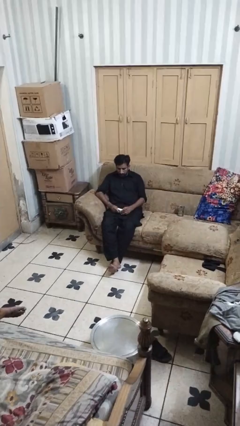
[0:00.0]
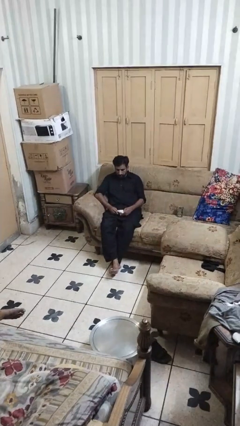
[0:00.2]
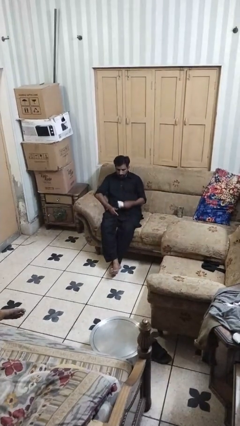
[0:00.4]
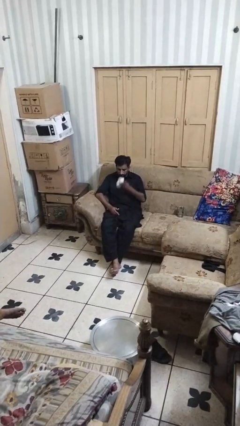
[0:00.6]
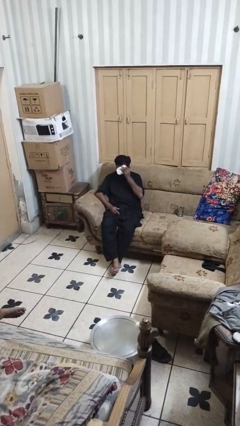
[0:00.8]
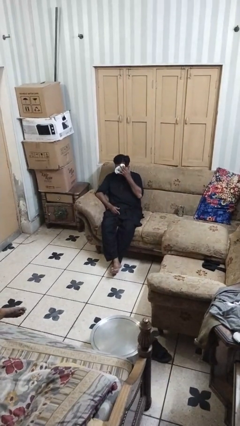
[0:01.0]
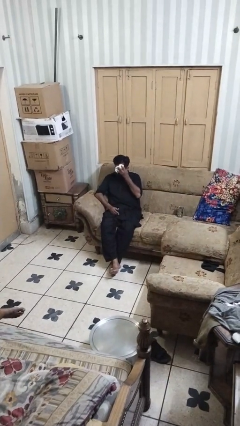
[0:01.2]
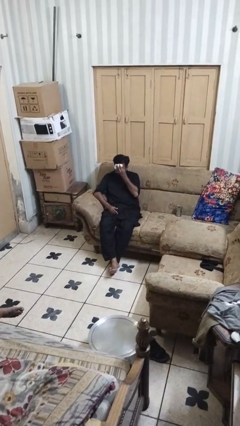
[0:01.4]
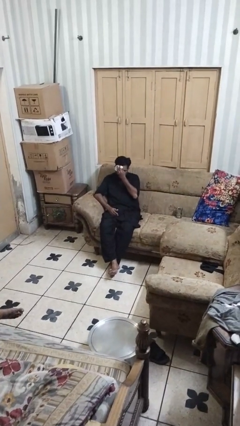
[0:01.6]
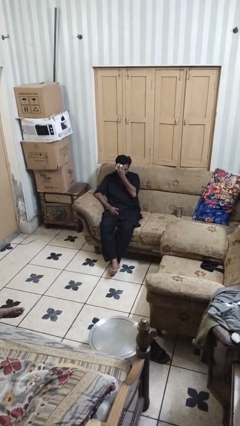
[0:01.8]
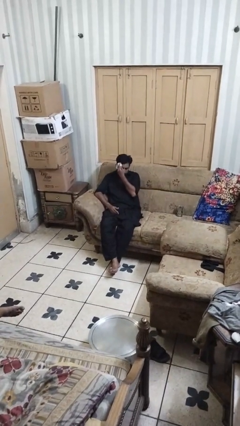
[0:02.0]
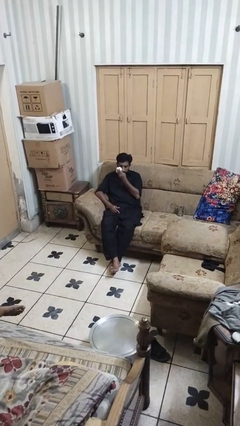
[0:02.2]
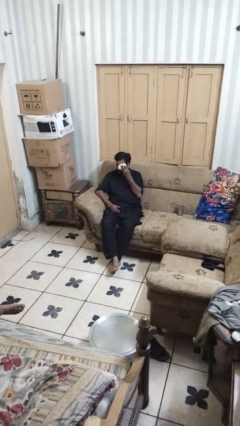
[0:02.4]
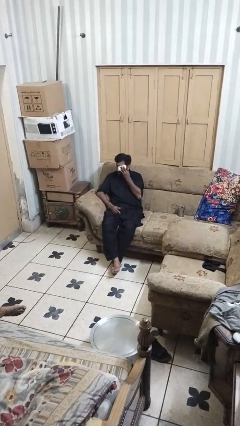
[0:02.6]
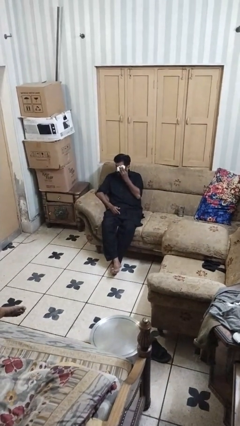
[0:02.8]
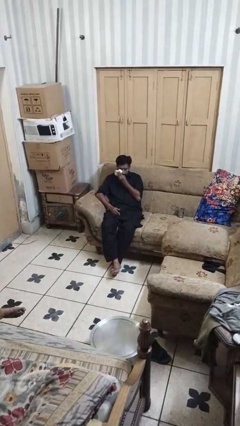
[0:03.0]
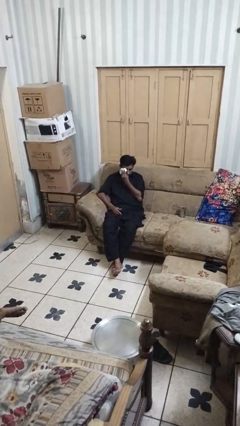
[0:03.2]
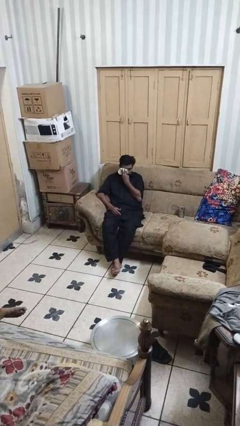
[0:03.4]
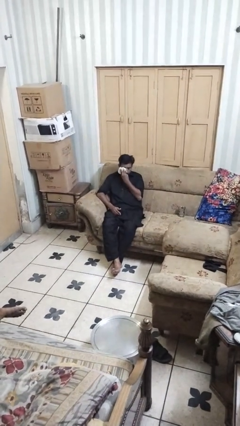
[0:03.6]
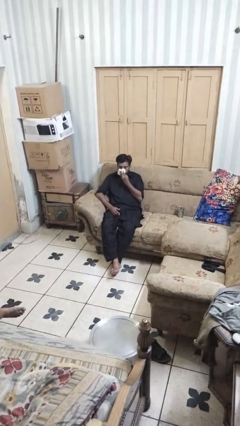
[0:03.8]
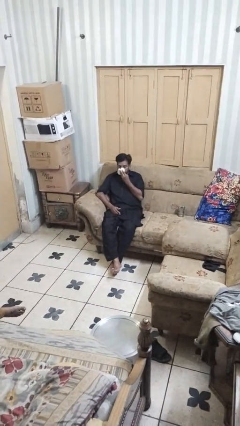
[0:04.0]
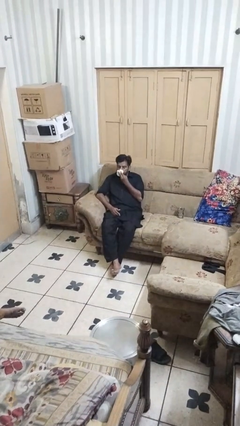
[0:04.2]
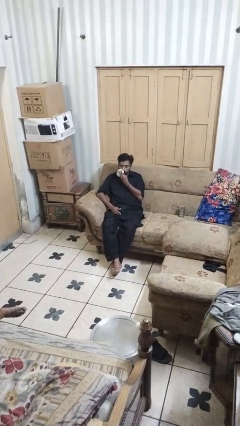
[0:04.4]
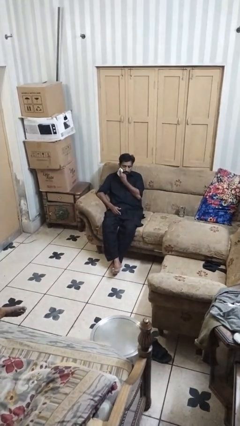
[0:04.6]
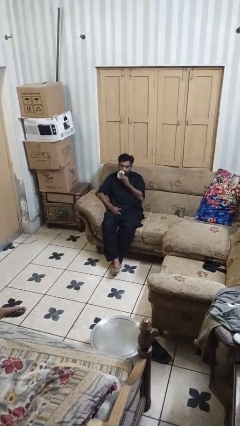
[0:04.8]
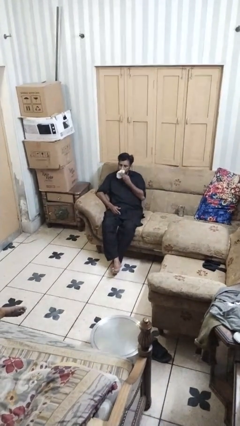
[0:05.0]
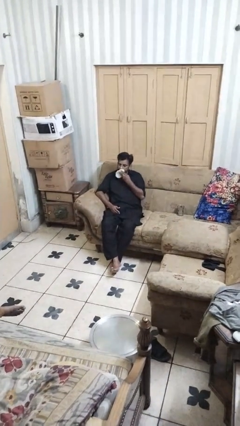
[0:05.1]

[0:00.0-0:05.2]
person wipes mouth with napkin

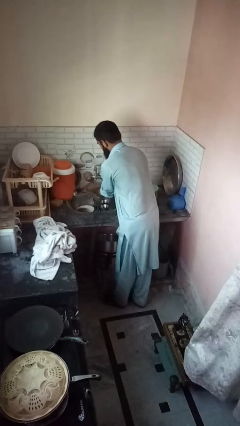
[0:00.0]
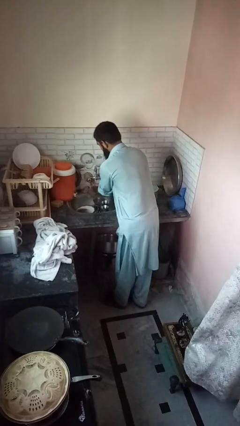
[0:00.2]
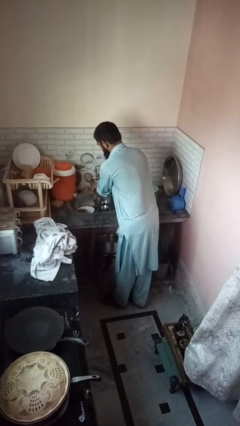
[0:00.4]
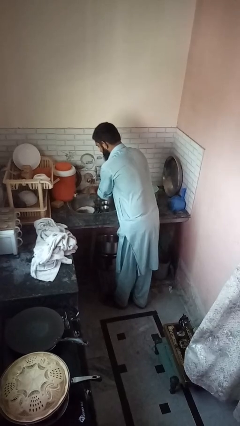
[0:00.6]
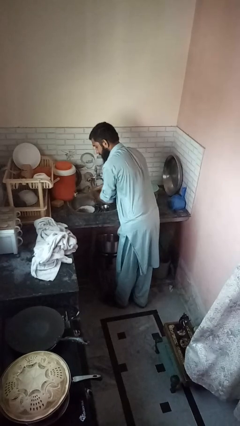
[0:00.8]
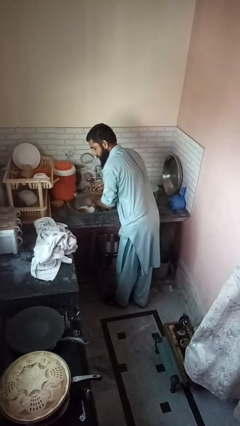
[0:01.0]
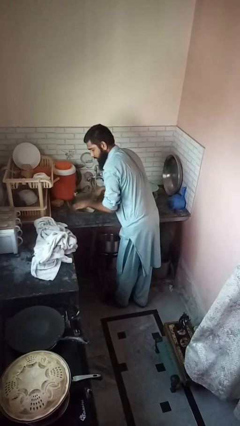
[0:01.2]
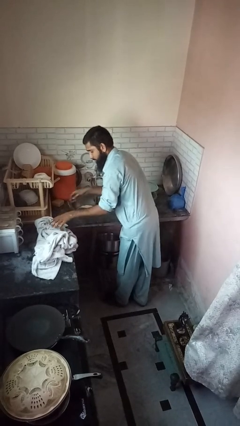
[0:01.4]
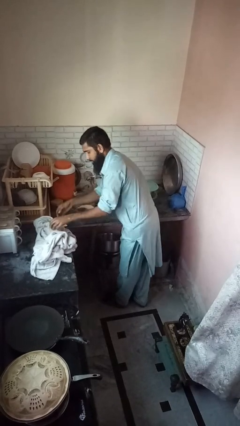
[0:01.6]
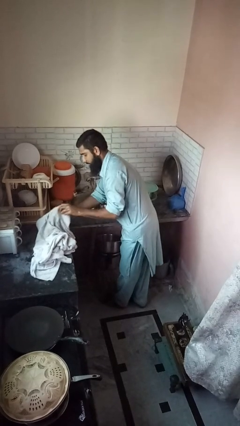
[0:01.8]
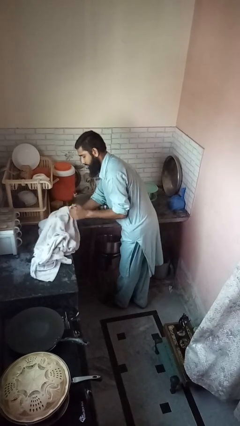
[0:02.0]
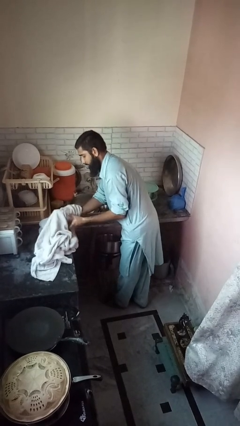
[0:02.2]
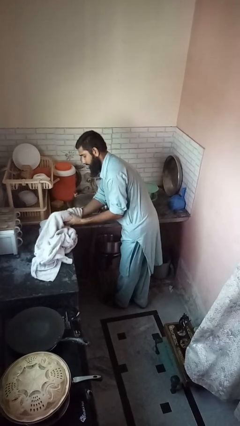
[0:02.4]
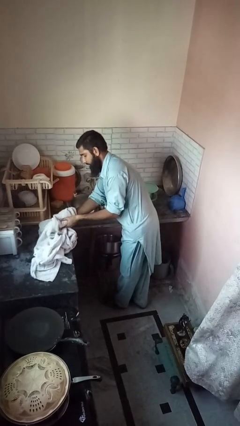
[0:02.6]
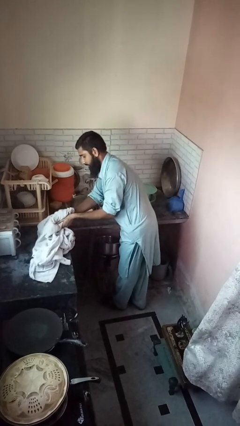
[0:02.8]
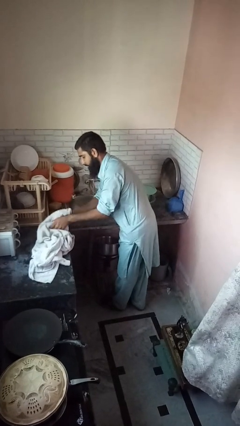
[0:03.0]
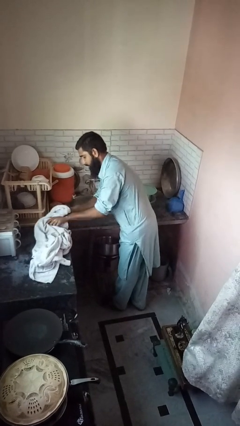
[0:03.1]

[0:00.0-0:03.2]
person dries hands with towel

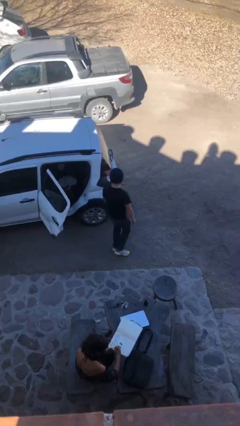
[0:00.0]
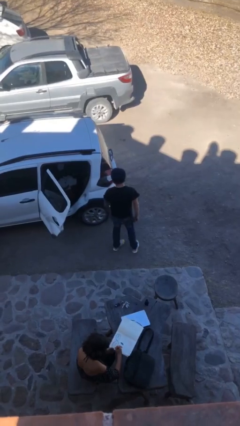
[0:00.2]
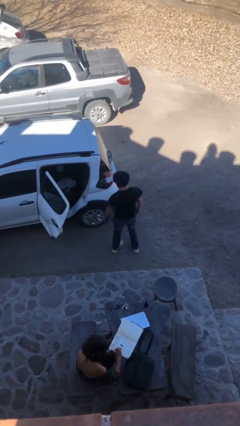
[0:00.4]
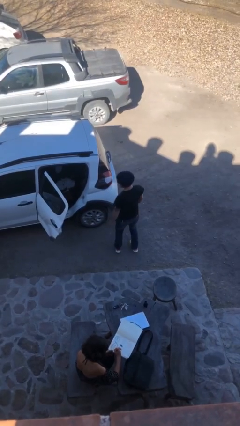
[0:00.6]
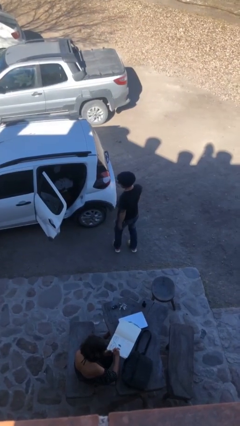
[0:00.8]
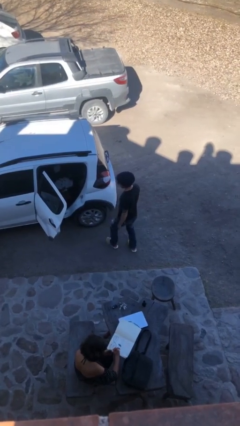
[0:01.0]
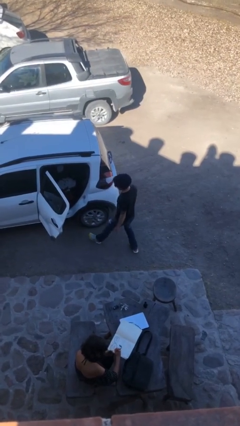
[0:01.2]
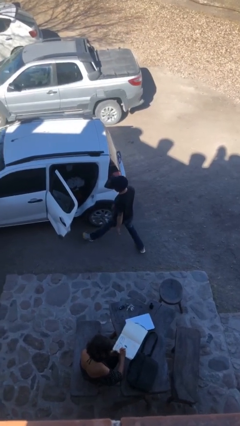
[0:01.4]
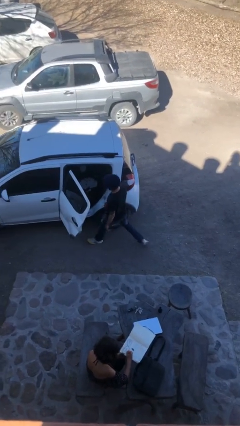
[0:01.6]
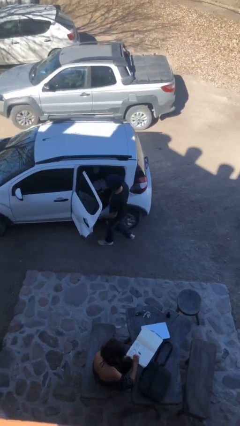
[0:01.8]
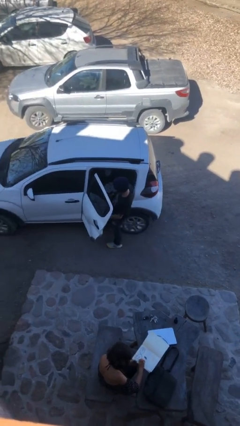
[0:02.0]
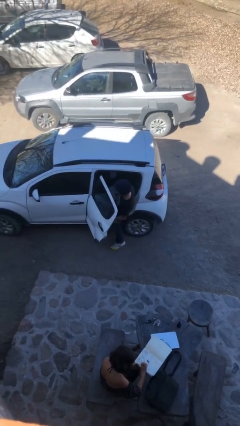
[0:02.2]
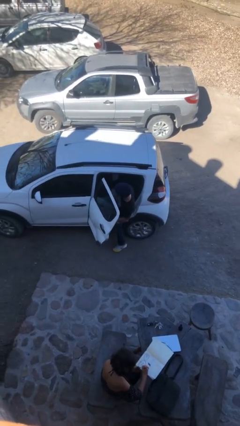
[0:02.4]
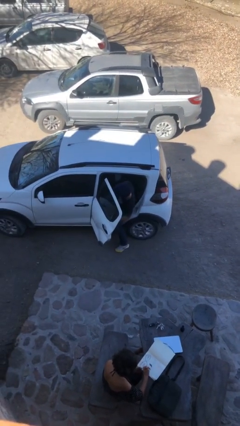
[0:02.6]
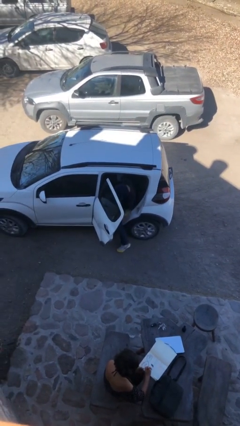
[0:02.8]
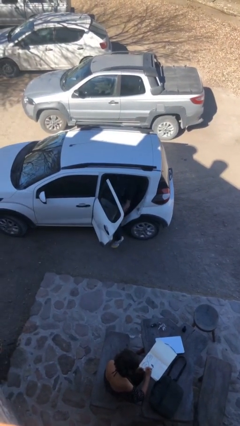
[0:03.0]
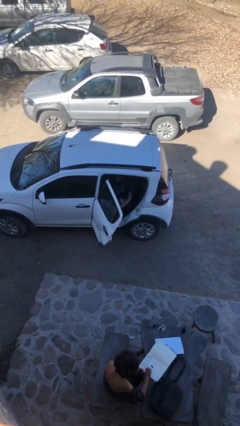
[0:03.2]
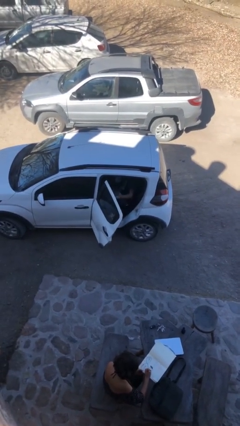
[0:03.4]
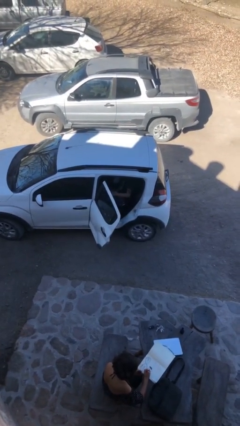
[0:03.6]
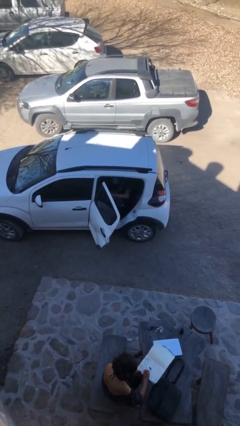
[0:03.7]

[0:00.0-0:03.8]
person enters car

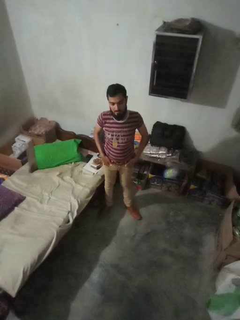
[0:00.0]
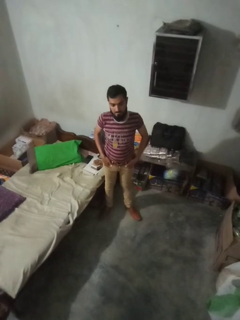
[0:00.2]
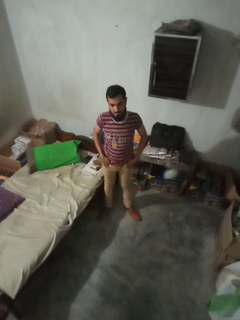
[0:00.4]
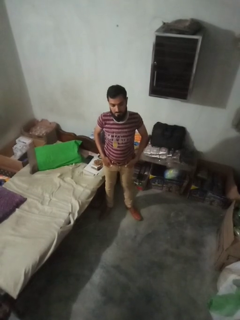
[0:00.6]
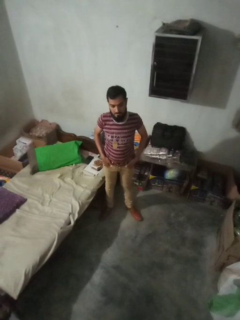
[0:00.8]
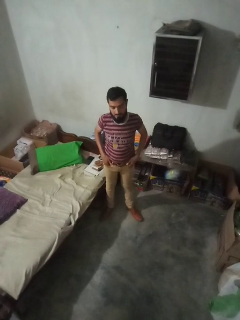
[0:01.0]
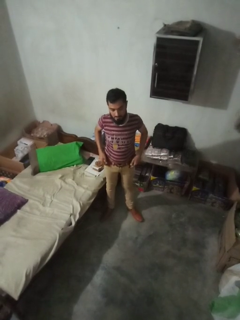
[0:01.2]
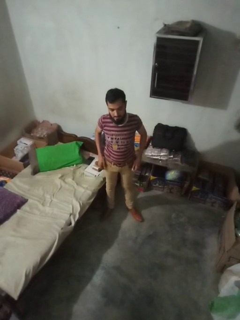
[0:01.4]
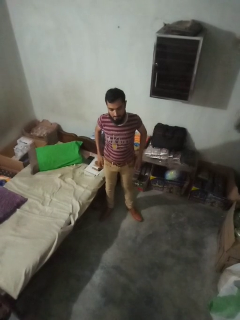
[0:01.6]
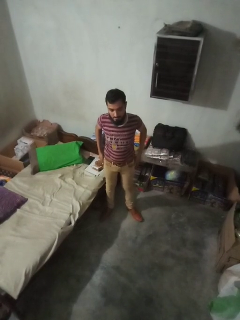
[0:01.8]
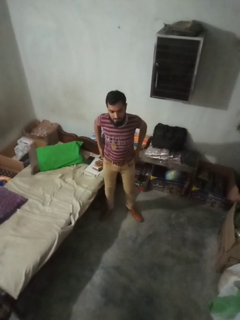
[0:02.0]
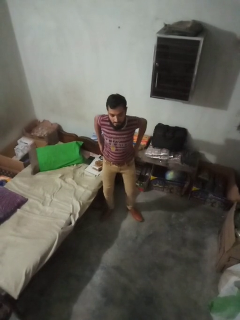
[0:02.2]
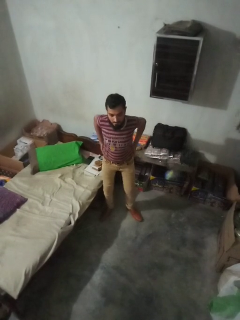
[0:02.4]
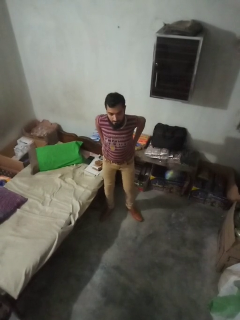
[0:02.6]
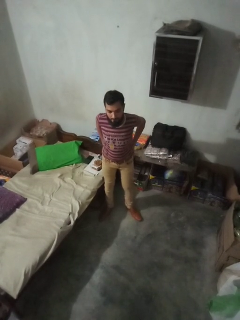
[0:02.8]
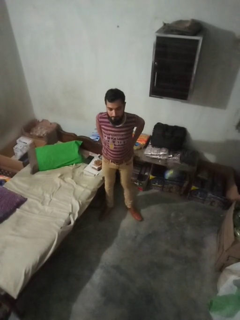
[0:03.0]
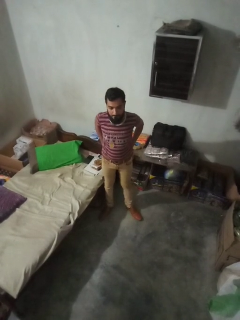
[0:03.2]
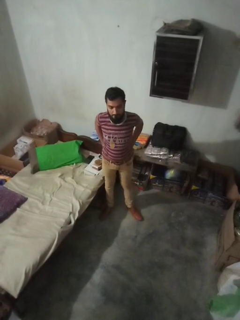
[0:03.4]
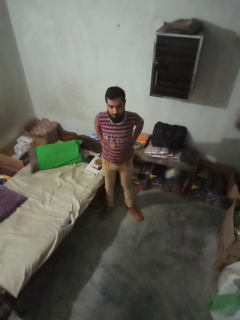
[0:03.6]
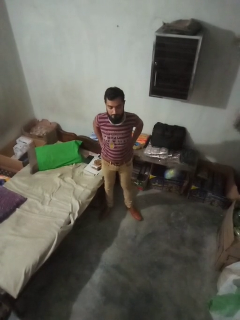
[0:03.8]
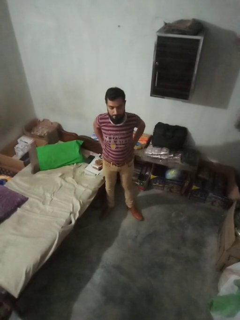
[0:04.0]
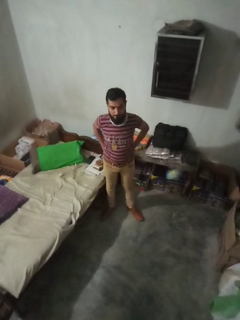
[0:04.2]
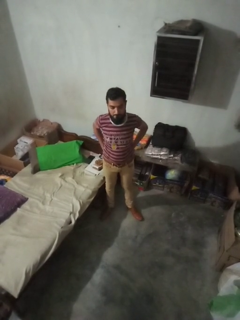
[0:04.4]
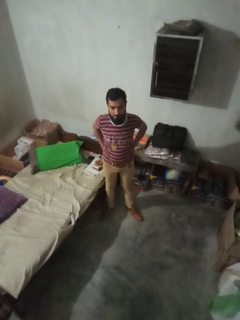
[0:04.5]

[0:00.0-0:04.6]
person puts hands in back pockets

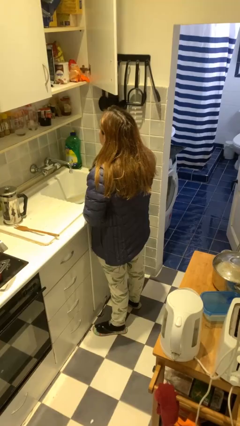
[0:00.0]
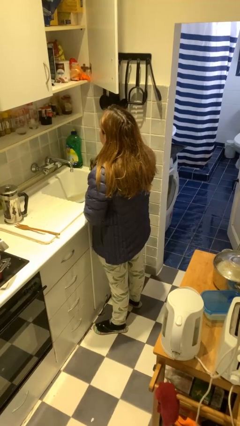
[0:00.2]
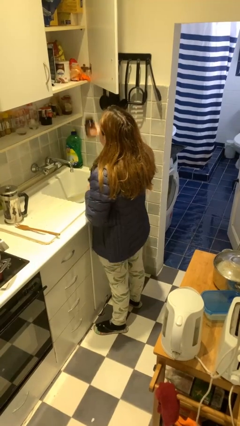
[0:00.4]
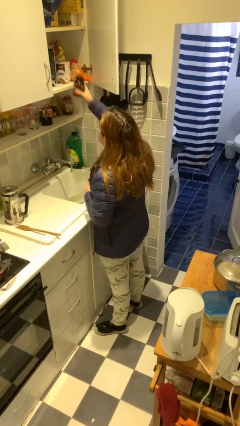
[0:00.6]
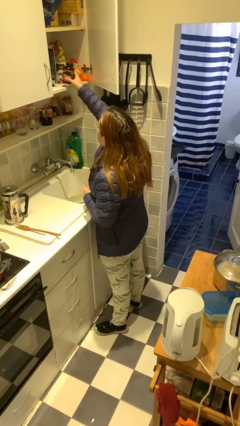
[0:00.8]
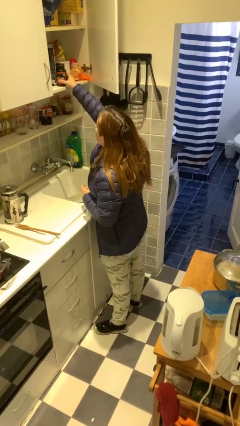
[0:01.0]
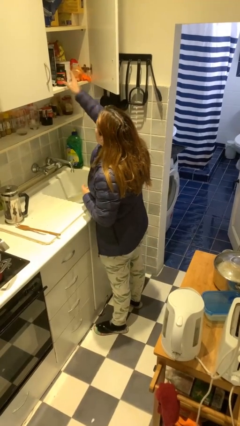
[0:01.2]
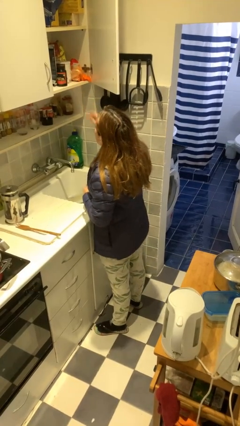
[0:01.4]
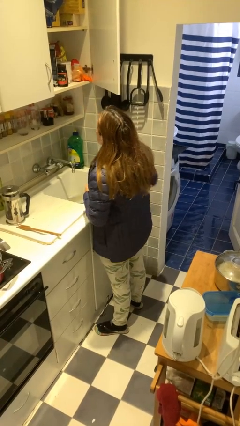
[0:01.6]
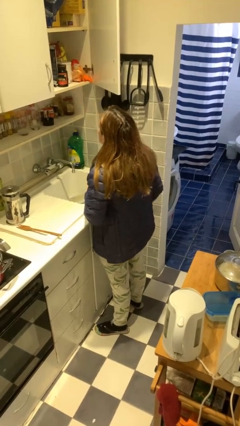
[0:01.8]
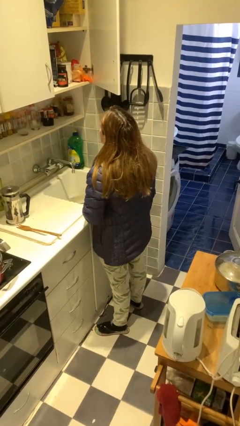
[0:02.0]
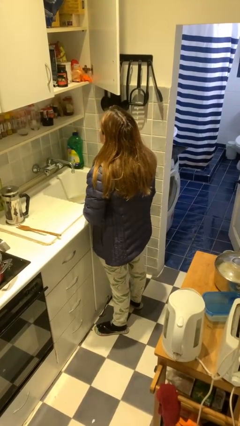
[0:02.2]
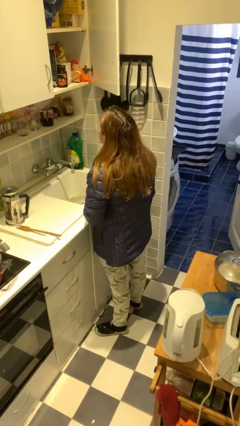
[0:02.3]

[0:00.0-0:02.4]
person puts object in cabinet
